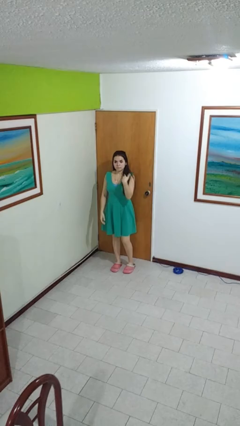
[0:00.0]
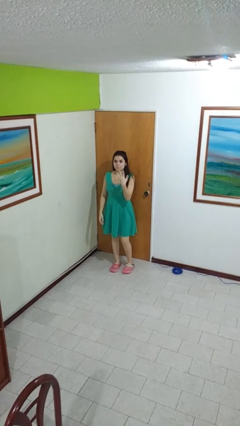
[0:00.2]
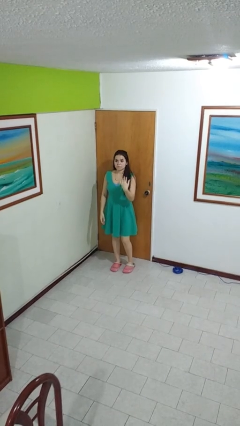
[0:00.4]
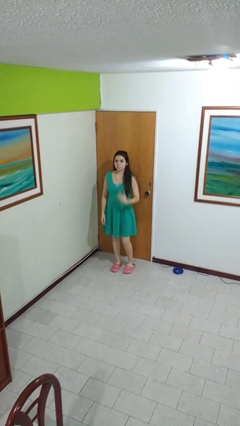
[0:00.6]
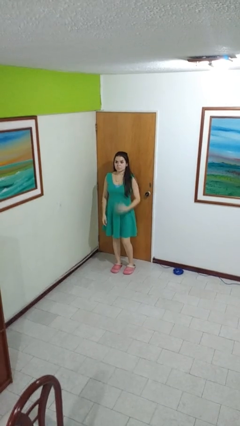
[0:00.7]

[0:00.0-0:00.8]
person gestures come here

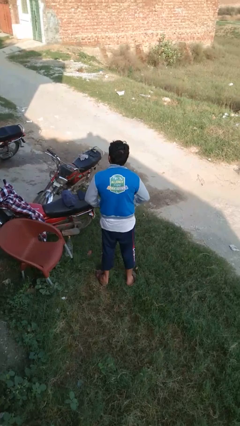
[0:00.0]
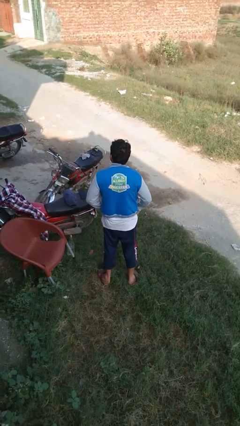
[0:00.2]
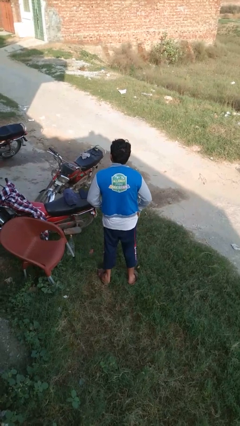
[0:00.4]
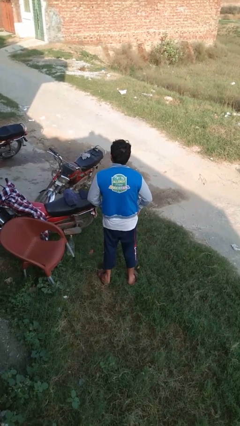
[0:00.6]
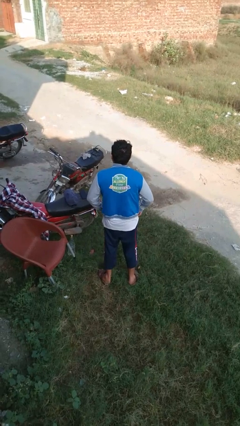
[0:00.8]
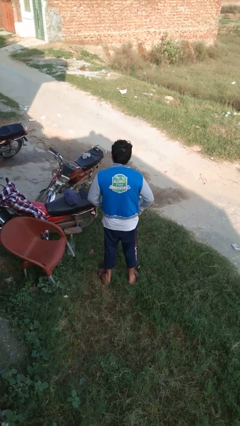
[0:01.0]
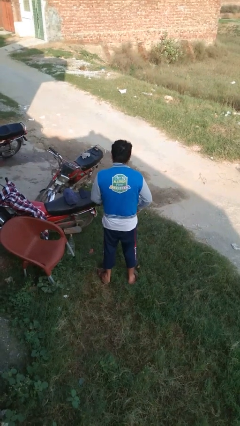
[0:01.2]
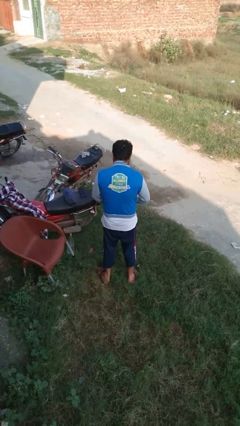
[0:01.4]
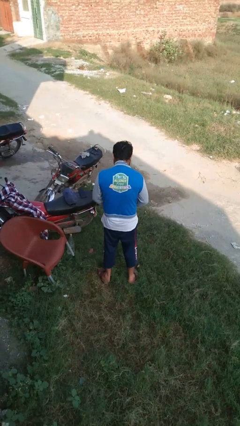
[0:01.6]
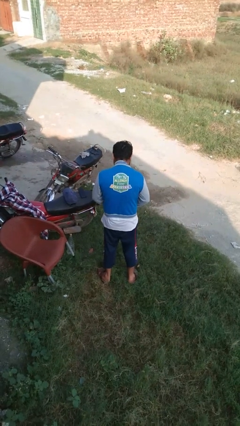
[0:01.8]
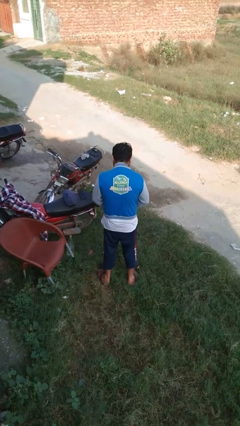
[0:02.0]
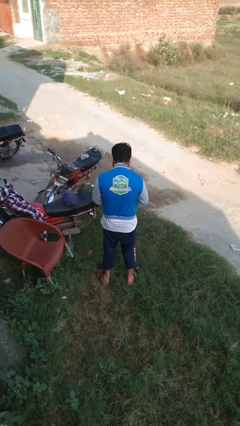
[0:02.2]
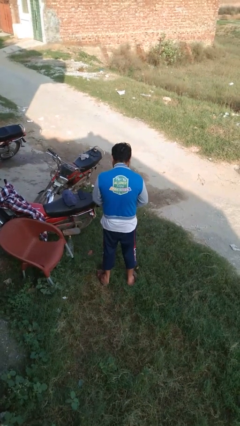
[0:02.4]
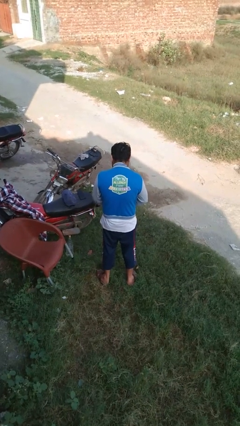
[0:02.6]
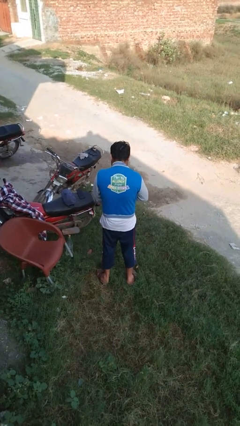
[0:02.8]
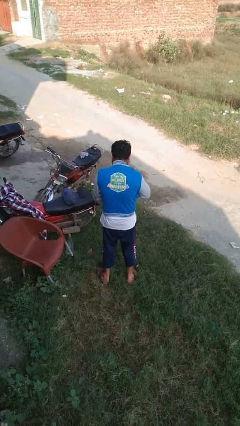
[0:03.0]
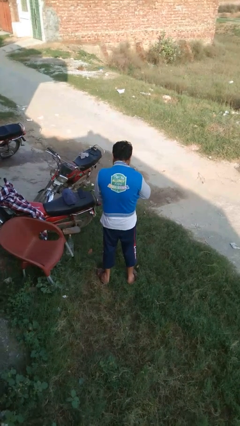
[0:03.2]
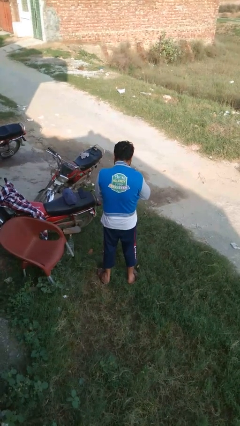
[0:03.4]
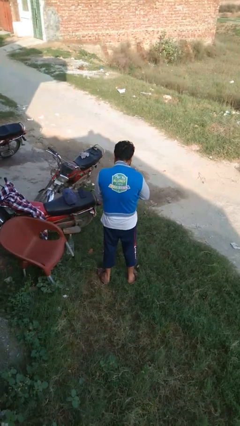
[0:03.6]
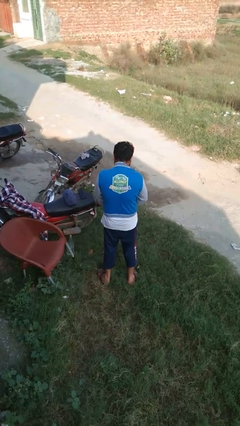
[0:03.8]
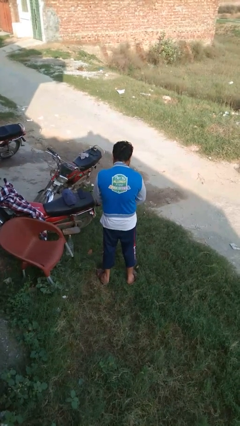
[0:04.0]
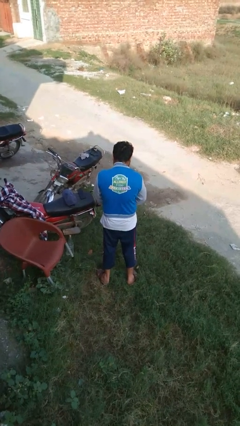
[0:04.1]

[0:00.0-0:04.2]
person zips up jacket

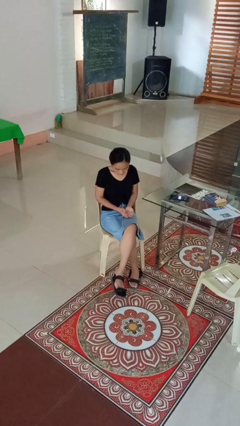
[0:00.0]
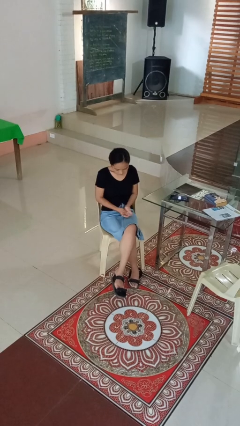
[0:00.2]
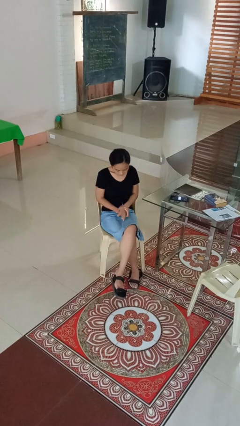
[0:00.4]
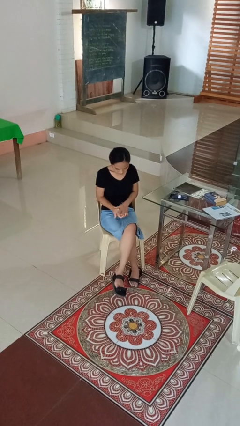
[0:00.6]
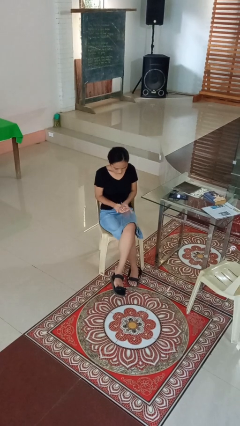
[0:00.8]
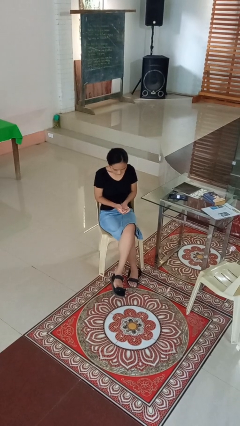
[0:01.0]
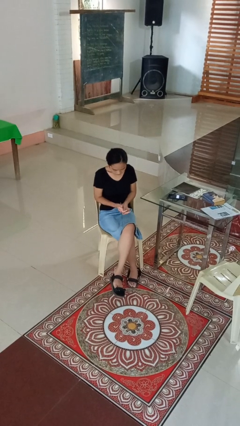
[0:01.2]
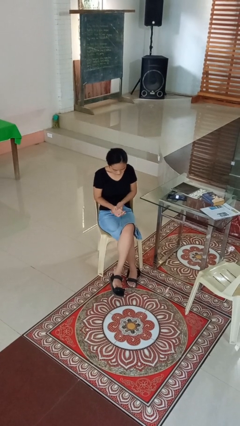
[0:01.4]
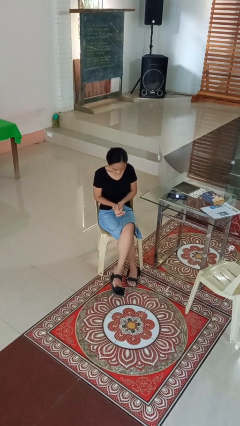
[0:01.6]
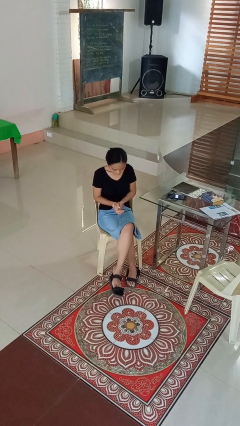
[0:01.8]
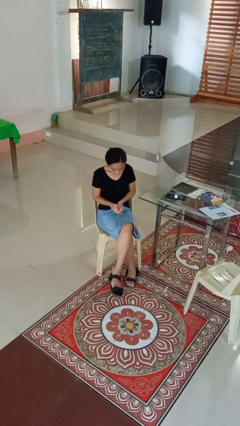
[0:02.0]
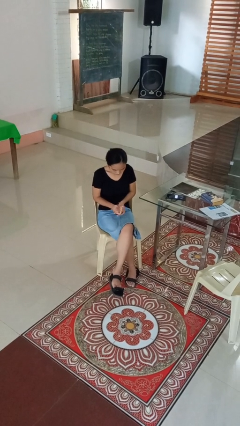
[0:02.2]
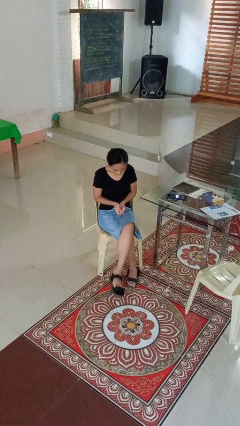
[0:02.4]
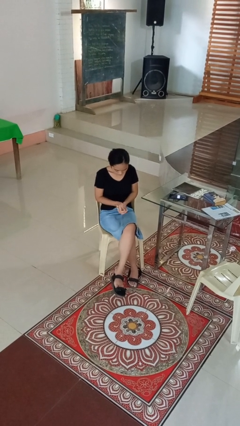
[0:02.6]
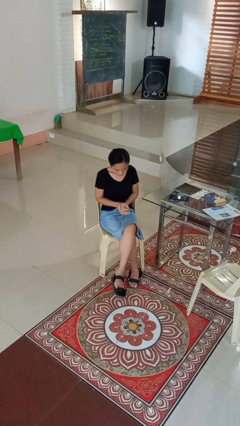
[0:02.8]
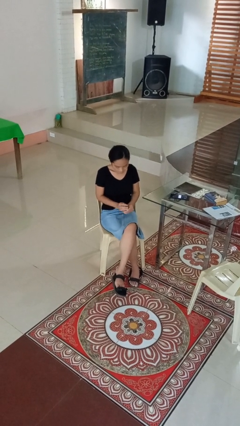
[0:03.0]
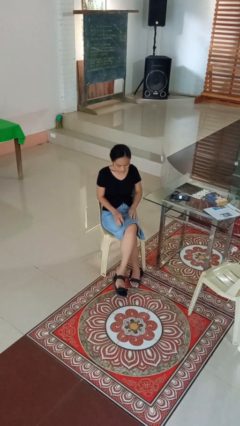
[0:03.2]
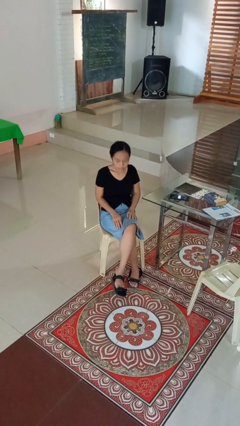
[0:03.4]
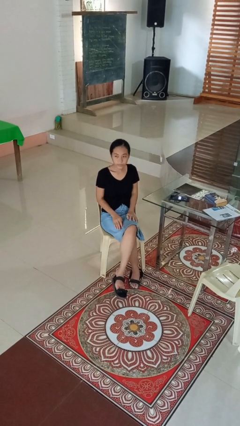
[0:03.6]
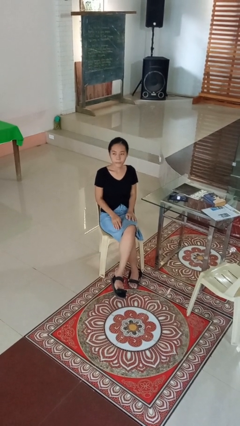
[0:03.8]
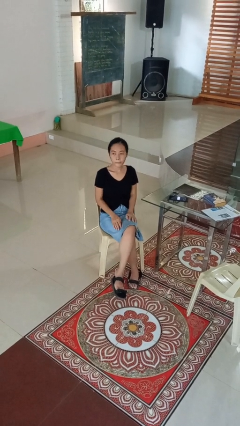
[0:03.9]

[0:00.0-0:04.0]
person looks at hands in lap

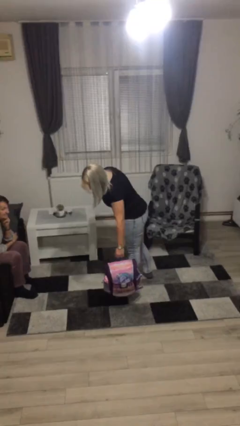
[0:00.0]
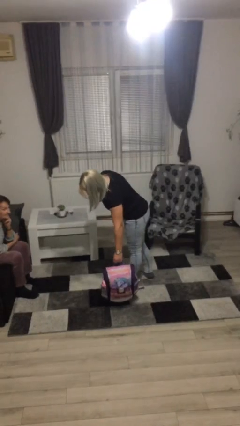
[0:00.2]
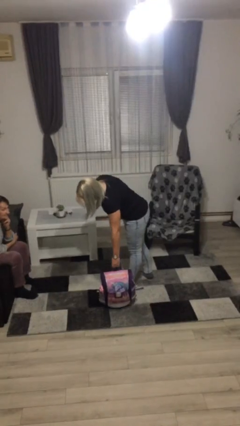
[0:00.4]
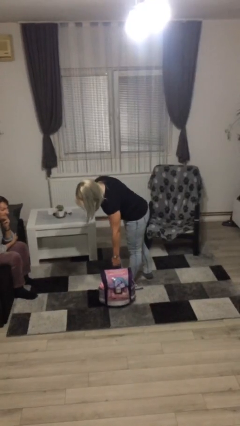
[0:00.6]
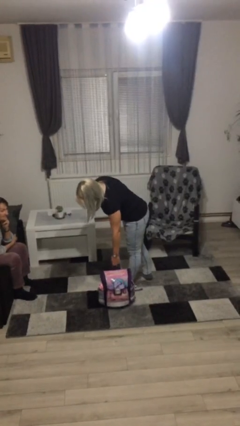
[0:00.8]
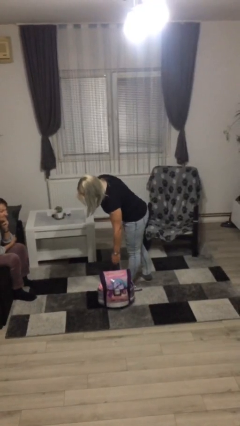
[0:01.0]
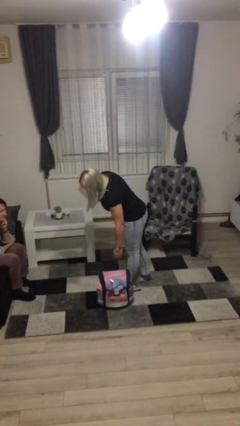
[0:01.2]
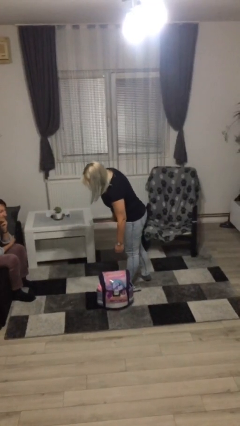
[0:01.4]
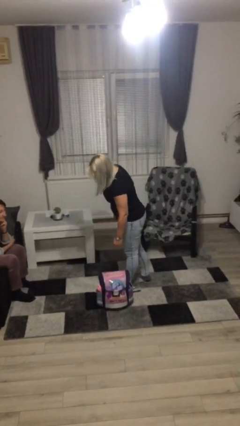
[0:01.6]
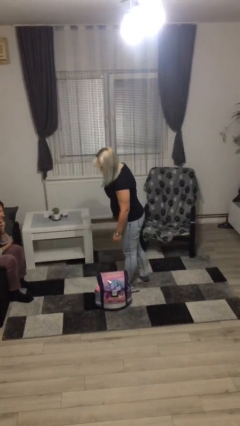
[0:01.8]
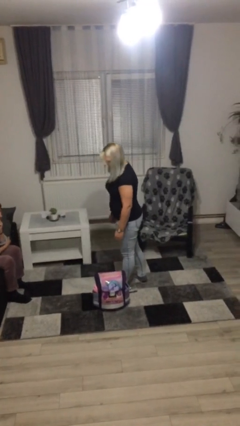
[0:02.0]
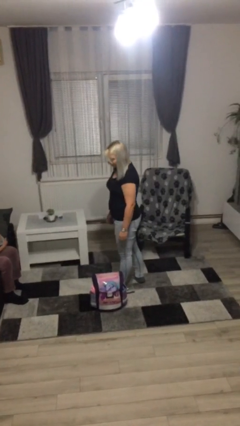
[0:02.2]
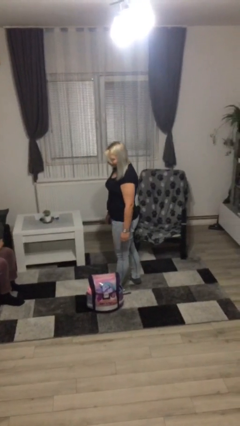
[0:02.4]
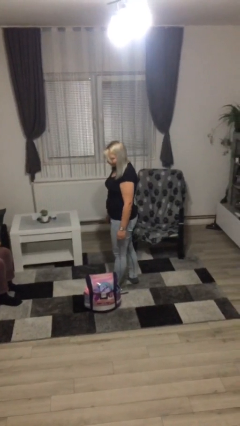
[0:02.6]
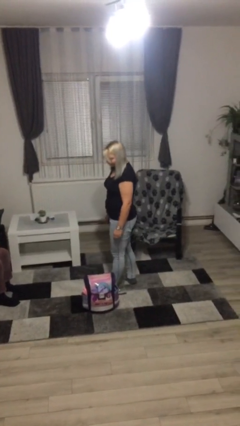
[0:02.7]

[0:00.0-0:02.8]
person puts down object on floor

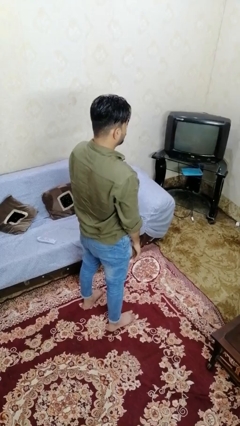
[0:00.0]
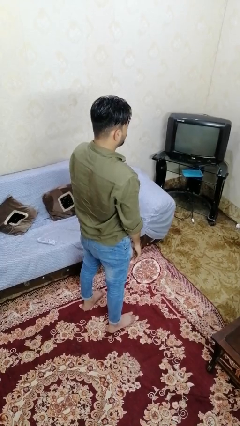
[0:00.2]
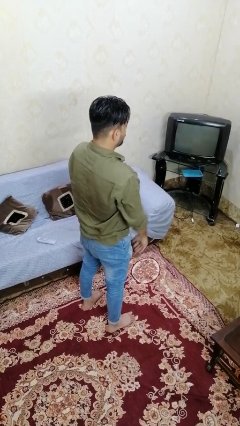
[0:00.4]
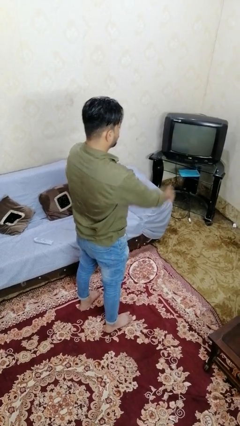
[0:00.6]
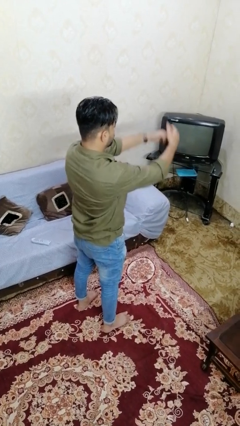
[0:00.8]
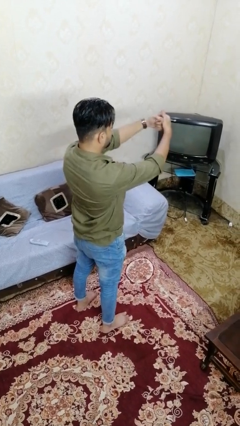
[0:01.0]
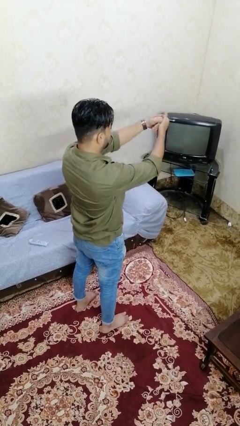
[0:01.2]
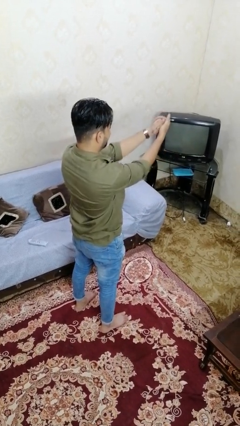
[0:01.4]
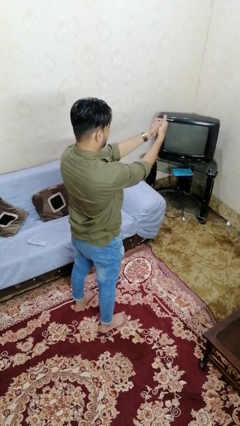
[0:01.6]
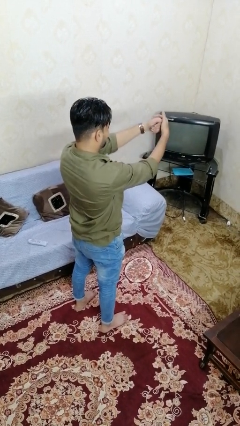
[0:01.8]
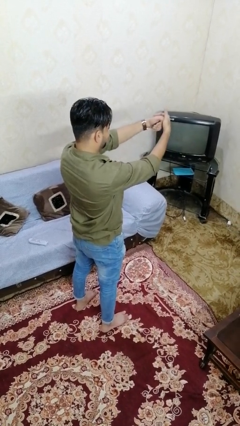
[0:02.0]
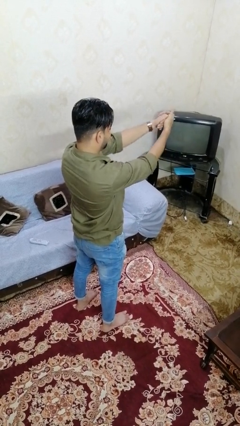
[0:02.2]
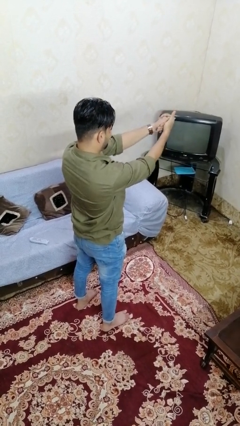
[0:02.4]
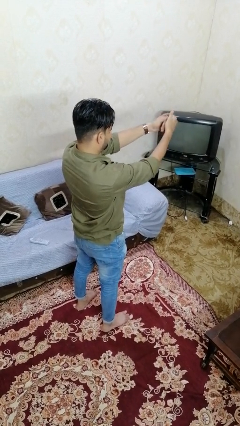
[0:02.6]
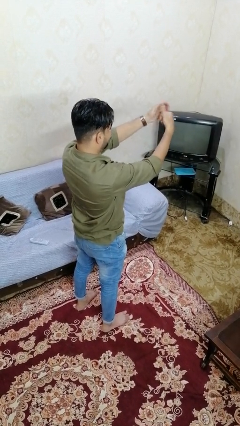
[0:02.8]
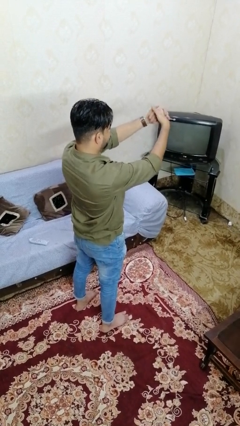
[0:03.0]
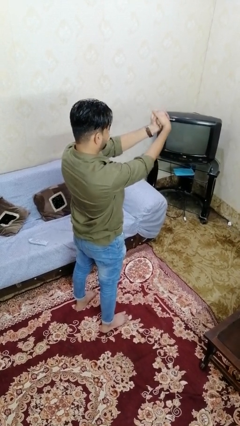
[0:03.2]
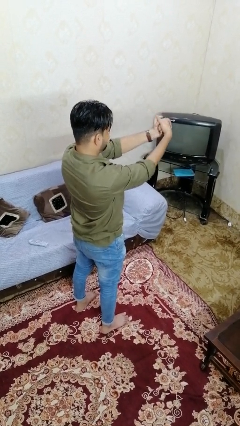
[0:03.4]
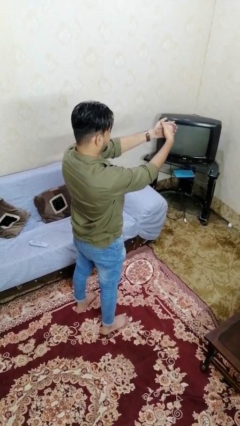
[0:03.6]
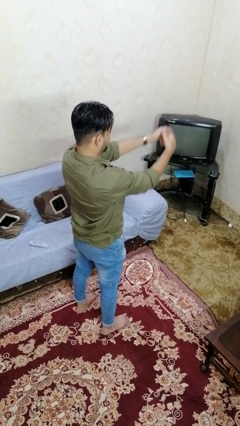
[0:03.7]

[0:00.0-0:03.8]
person cracks knuckles

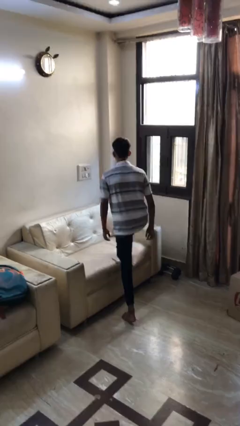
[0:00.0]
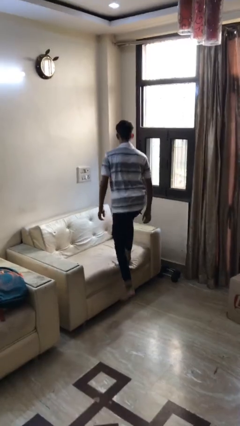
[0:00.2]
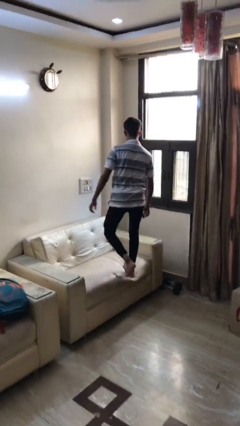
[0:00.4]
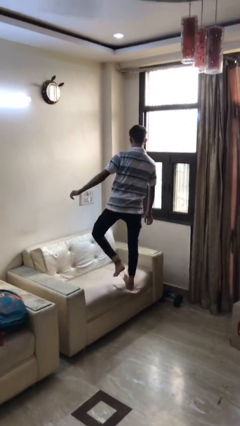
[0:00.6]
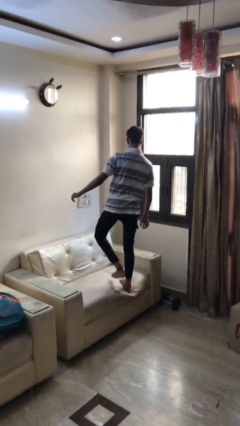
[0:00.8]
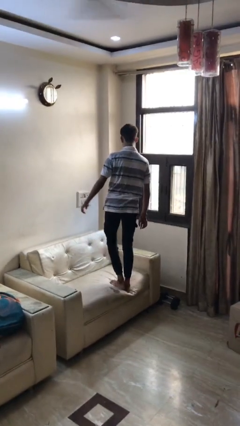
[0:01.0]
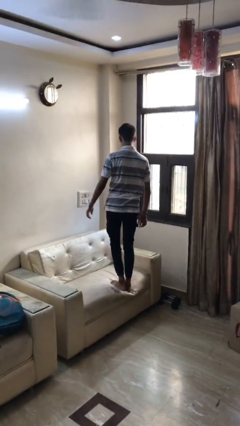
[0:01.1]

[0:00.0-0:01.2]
person climbs on couch

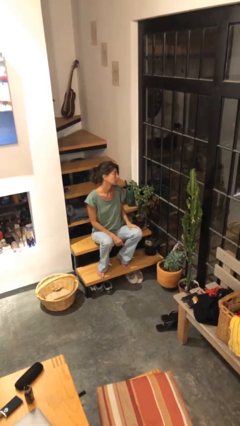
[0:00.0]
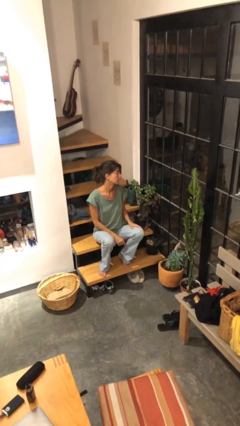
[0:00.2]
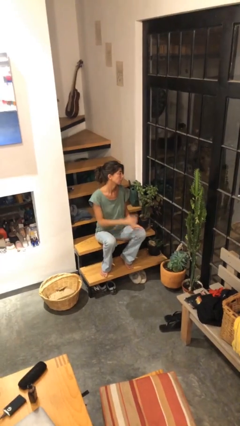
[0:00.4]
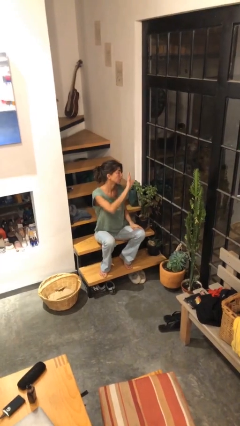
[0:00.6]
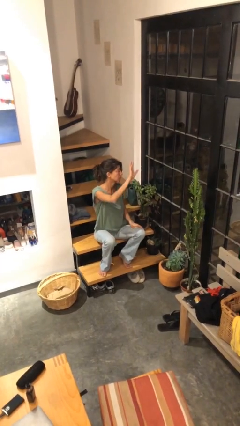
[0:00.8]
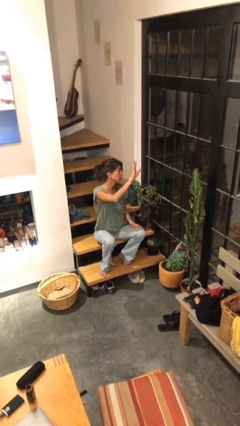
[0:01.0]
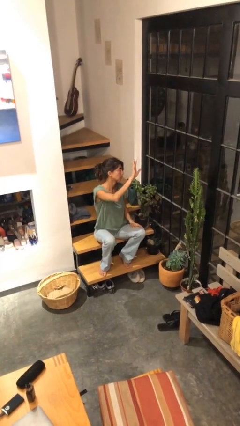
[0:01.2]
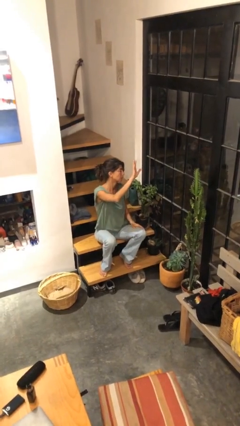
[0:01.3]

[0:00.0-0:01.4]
person gestures raise hand
